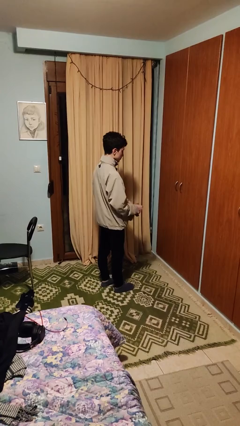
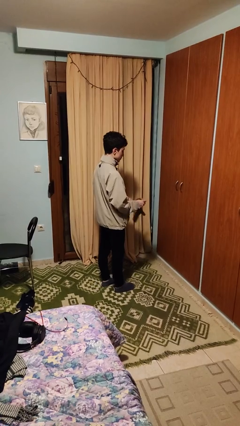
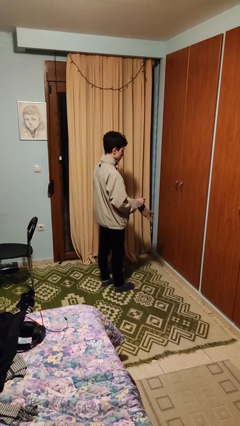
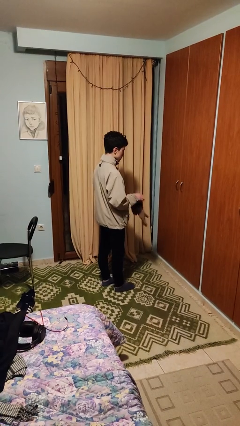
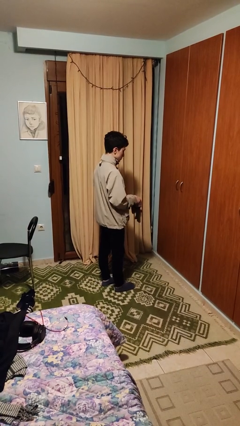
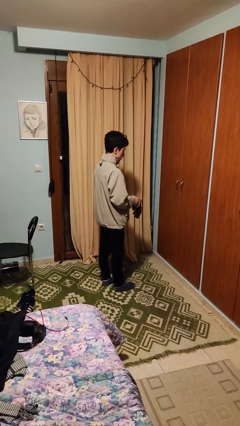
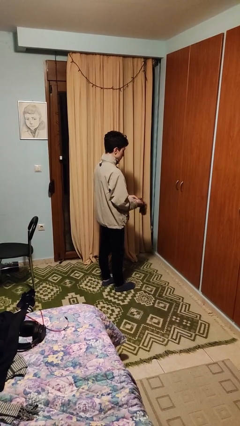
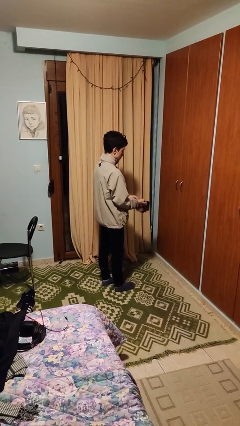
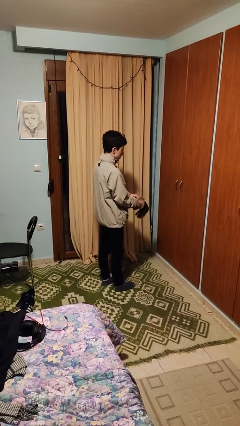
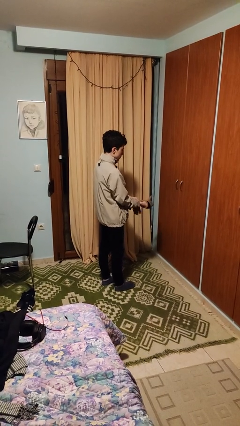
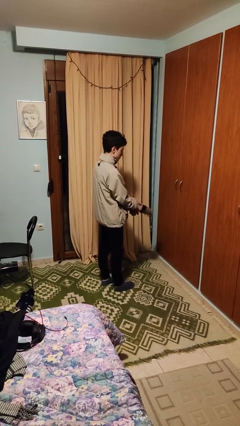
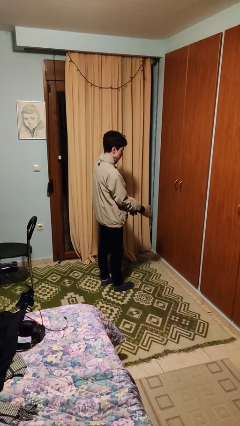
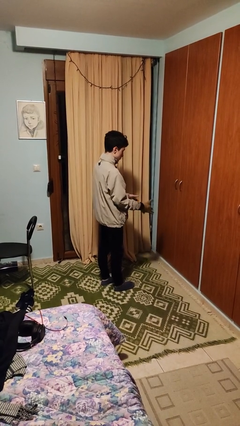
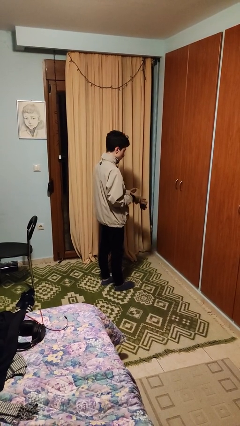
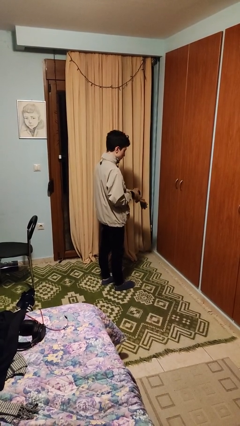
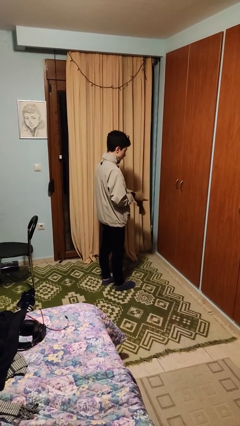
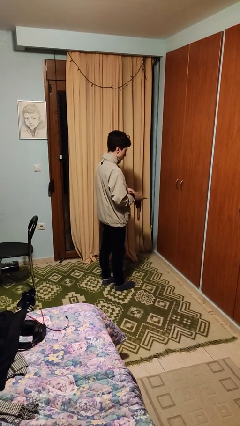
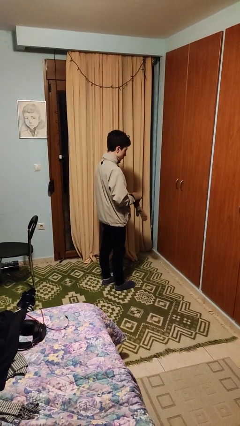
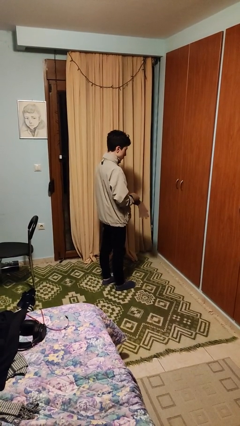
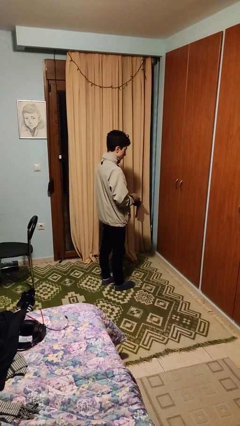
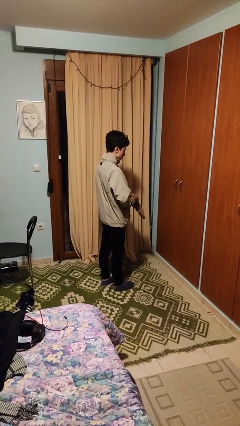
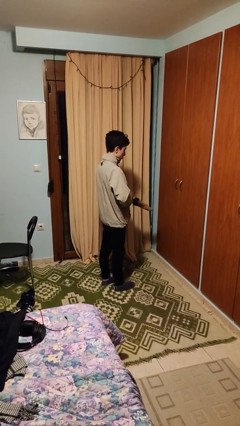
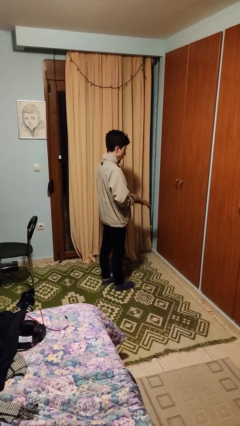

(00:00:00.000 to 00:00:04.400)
person puts on gloves

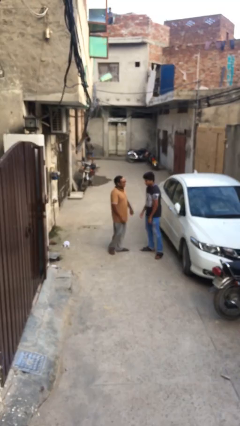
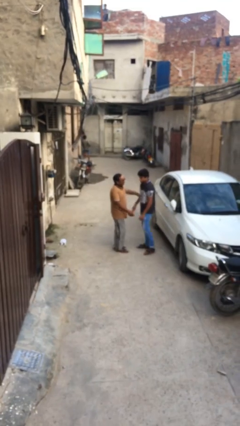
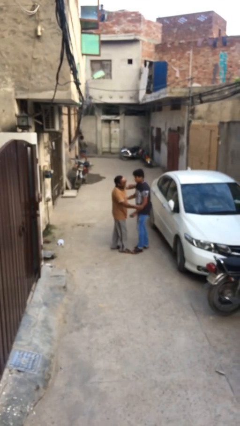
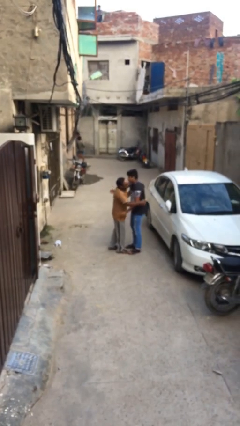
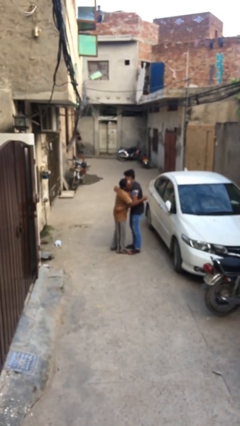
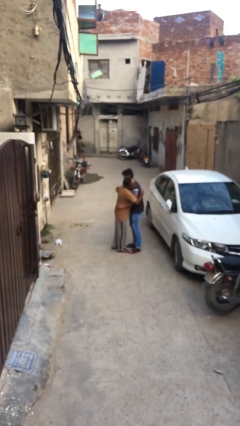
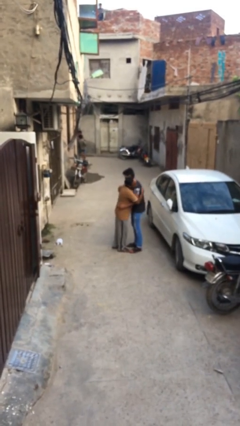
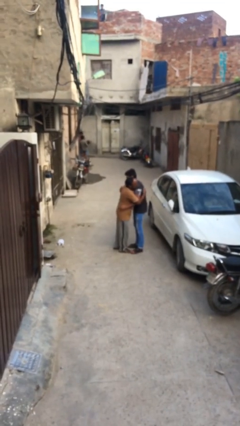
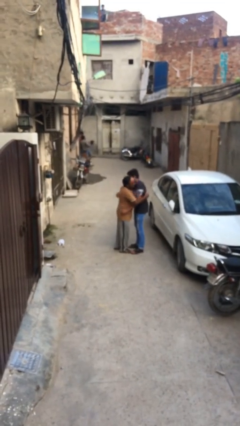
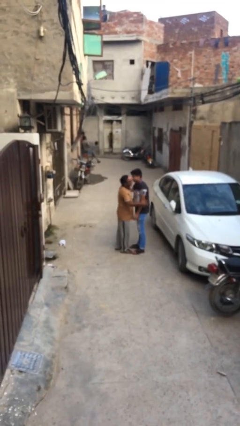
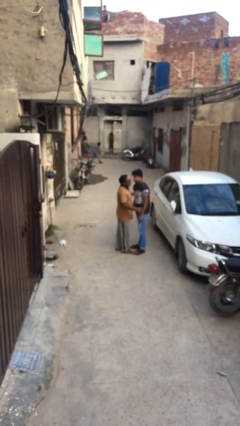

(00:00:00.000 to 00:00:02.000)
person embraces person

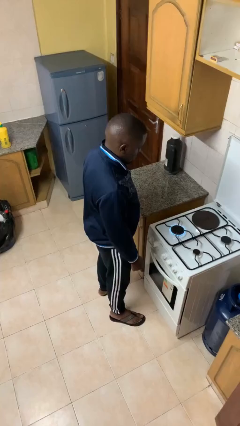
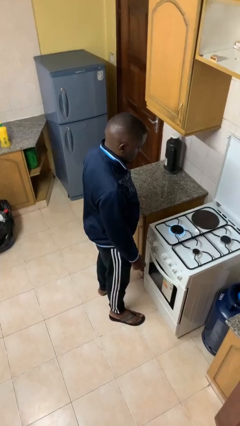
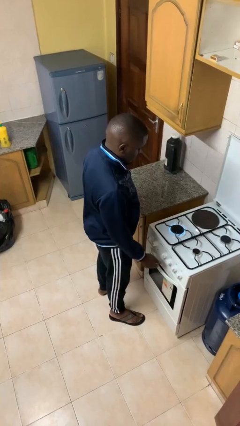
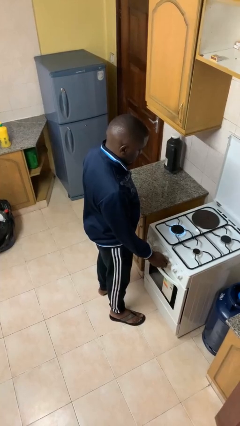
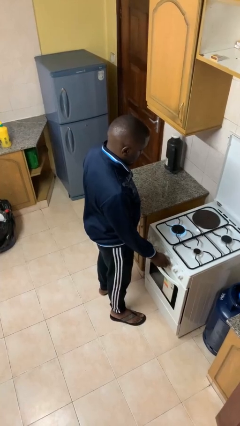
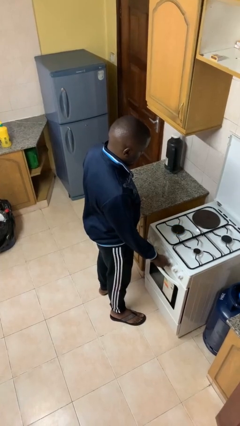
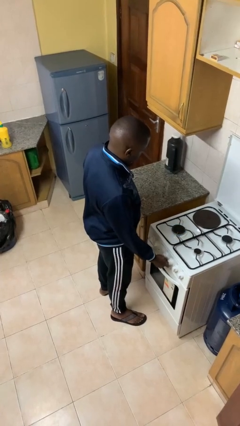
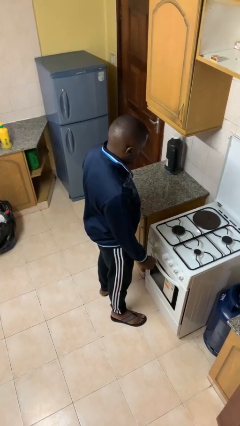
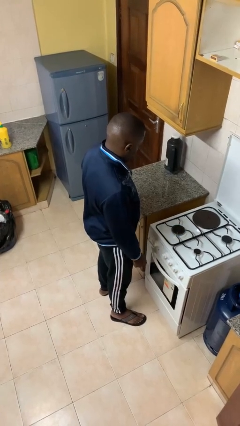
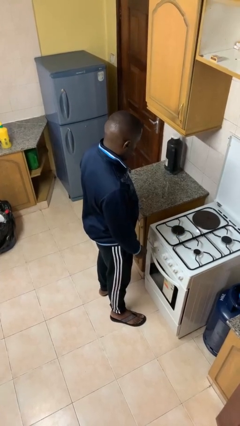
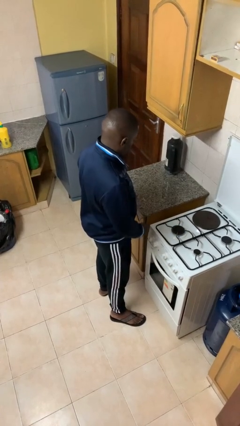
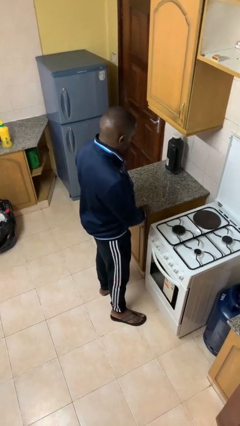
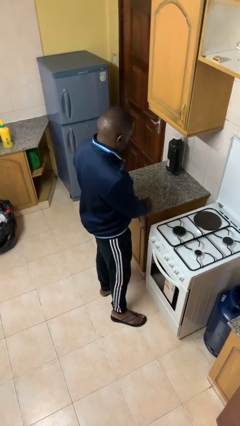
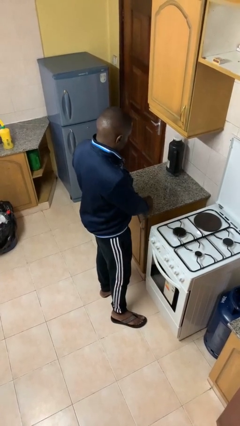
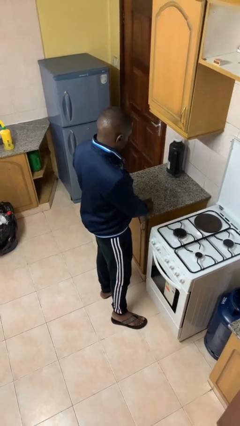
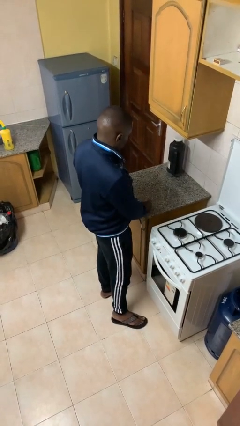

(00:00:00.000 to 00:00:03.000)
person turns off stovetop

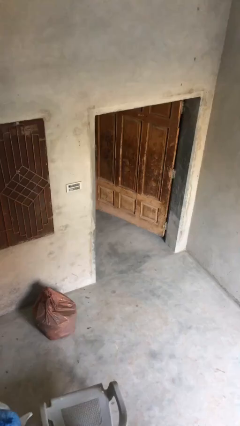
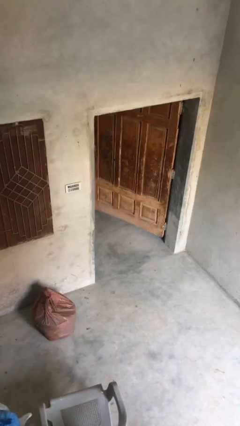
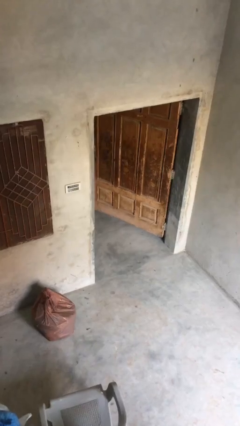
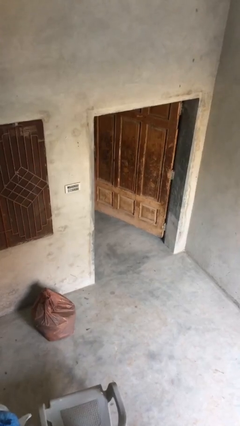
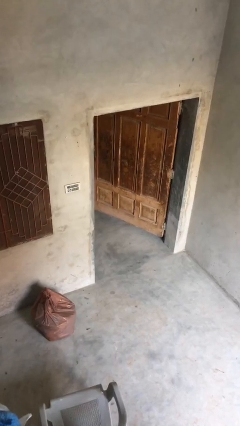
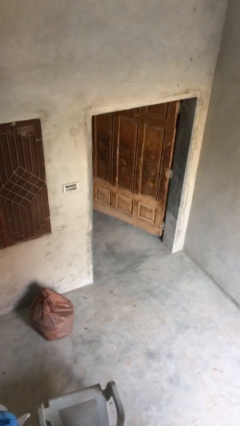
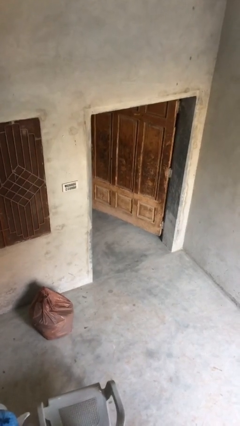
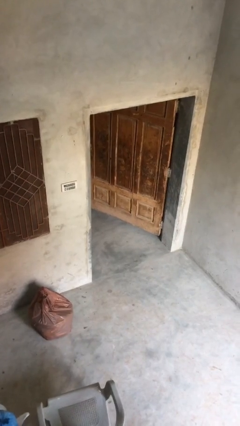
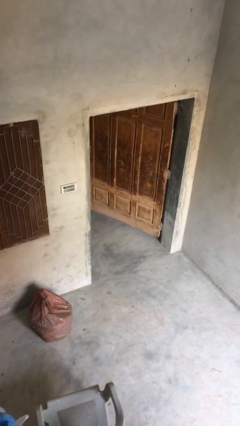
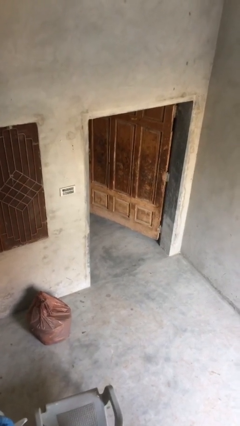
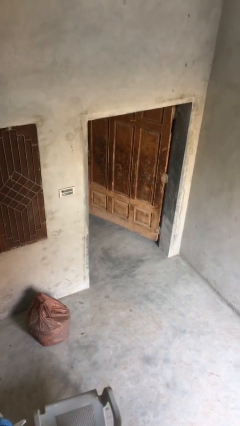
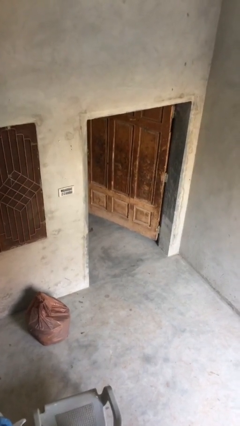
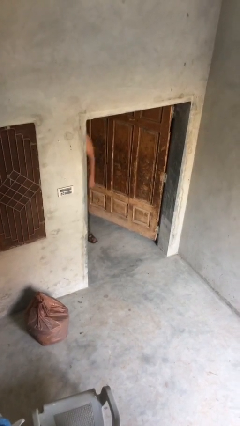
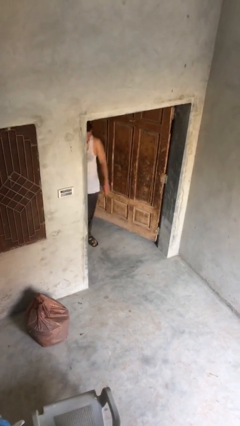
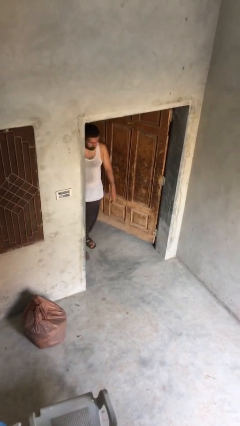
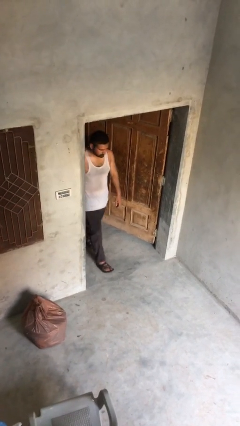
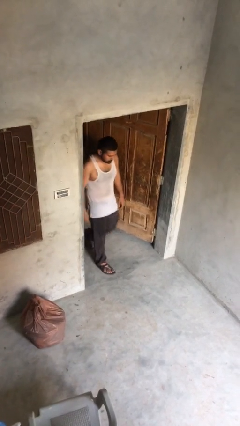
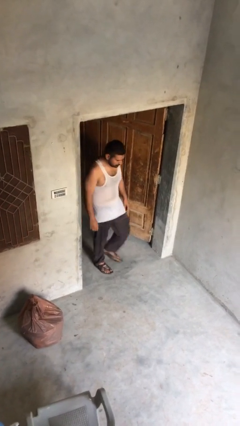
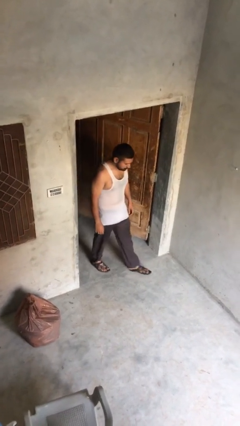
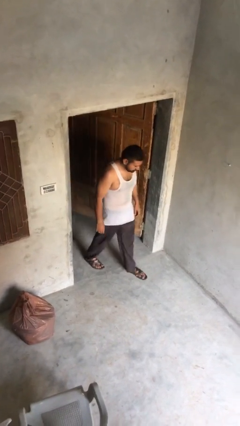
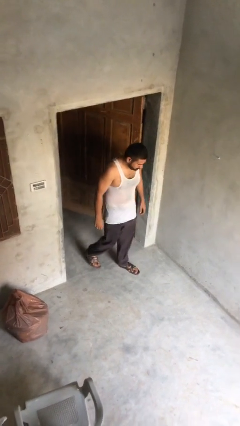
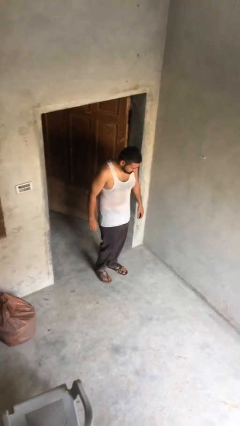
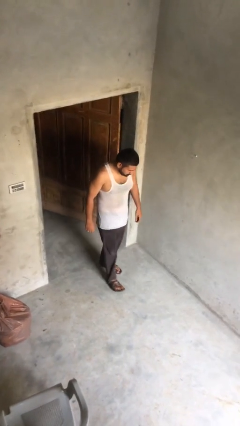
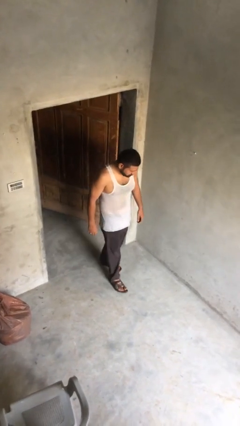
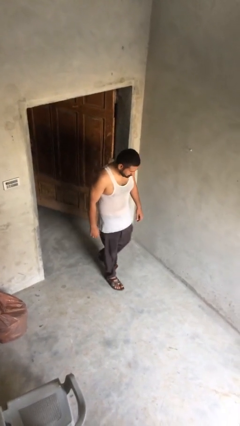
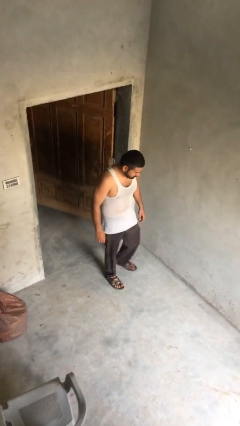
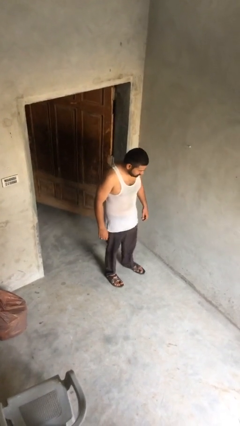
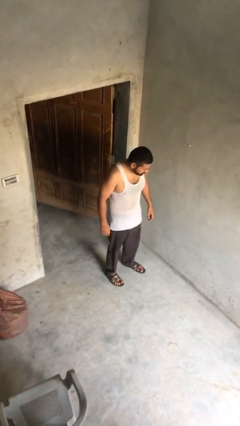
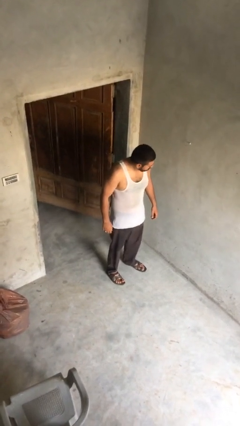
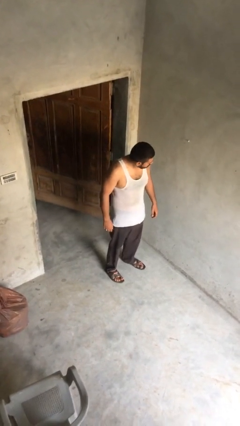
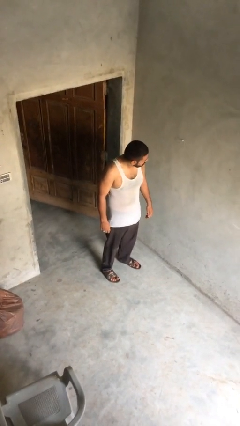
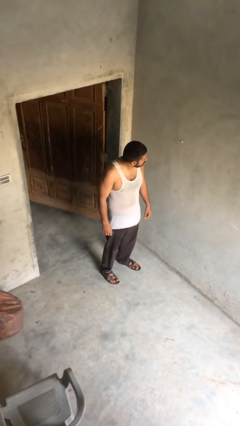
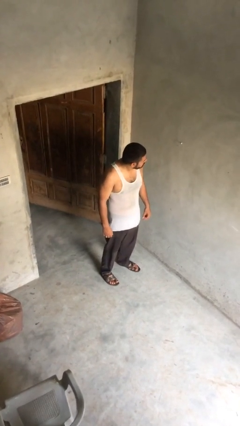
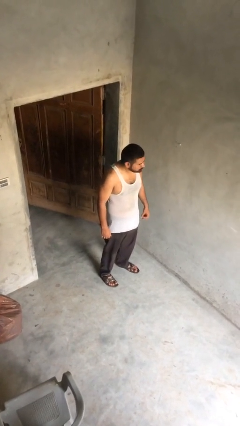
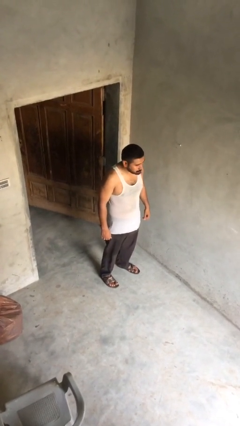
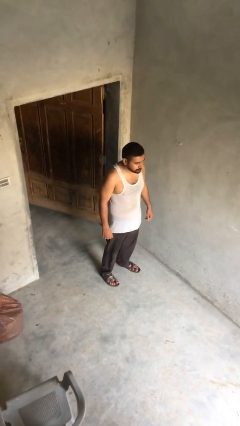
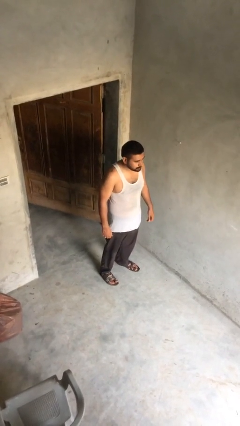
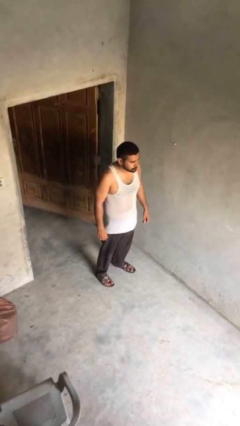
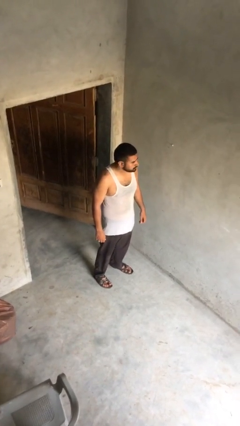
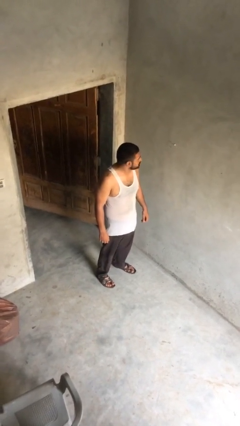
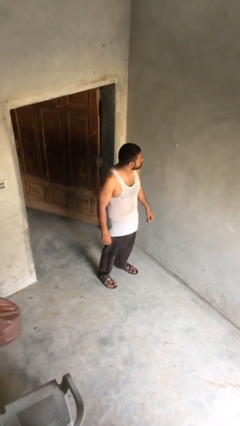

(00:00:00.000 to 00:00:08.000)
person enters scene through structure

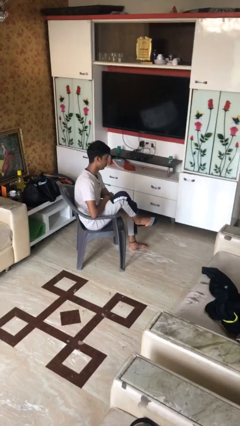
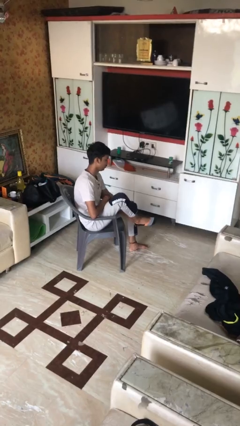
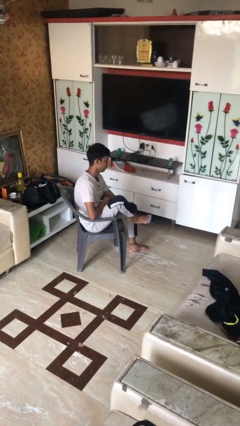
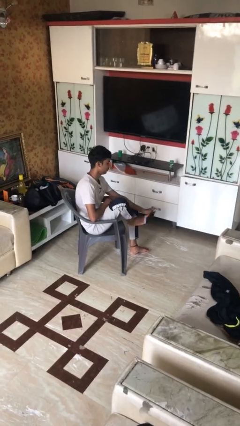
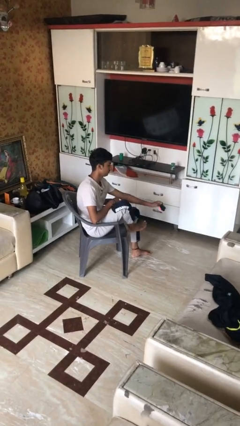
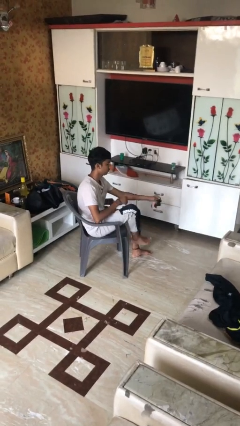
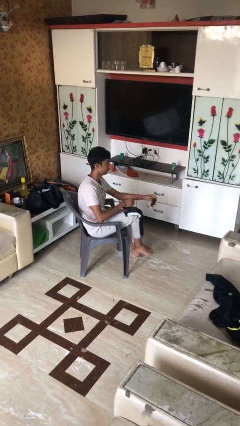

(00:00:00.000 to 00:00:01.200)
person takes off socks
